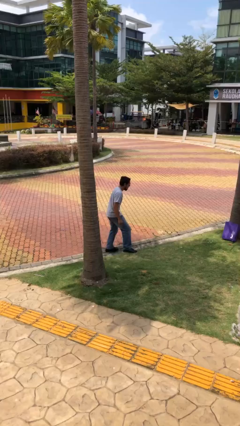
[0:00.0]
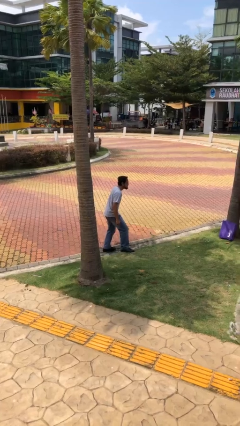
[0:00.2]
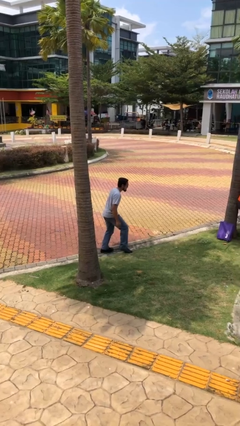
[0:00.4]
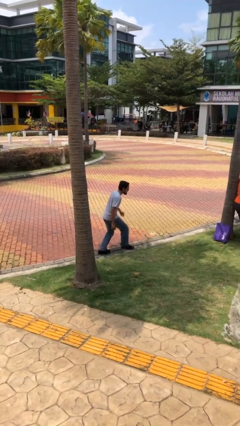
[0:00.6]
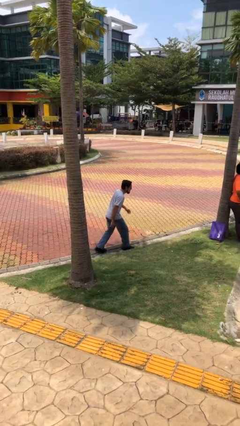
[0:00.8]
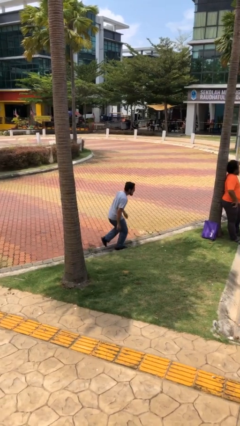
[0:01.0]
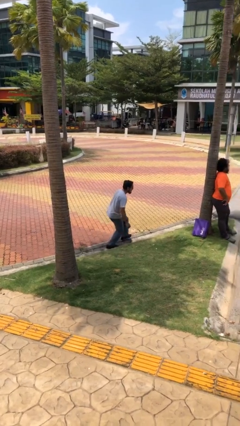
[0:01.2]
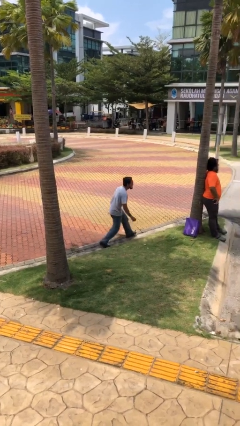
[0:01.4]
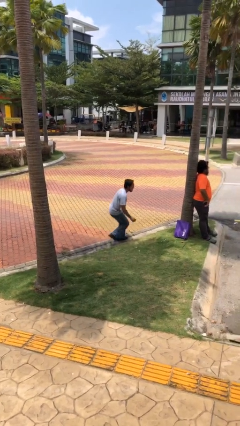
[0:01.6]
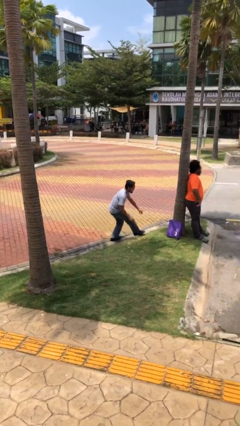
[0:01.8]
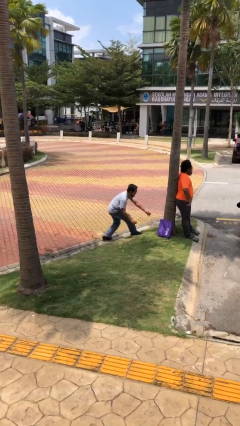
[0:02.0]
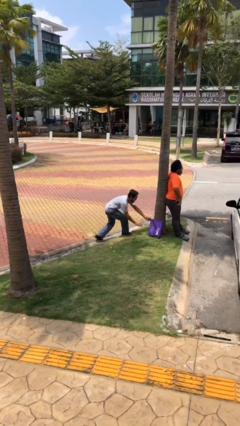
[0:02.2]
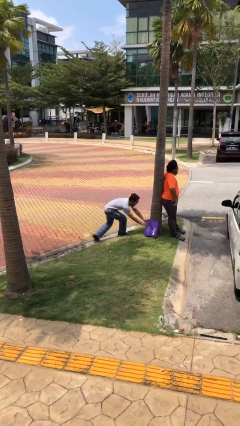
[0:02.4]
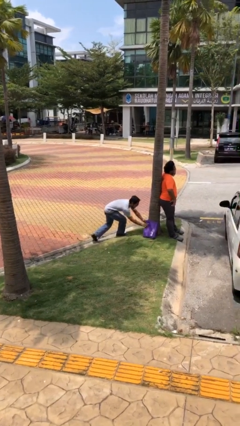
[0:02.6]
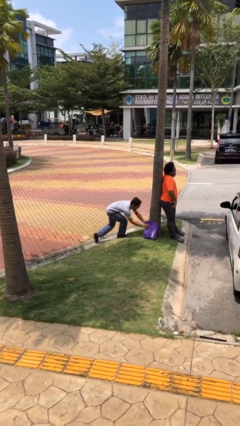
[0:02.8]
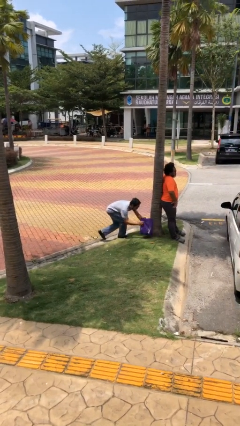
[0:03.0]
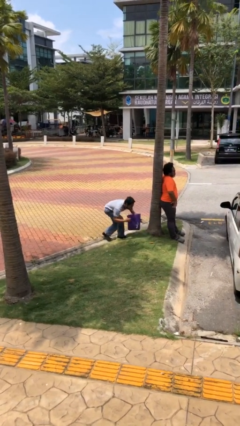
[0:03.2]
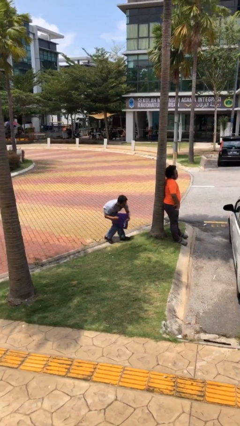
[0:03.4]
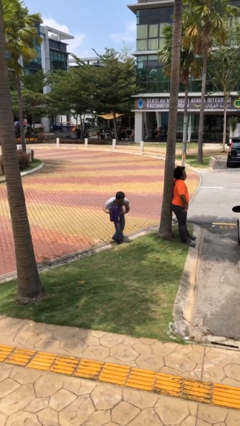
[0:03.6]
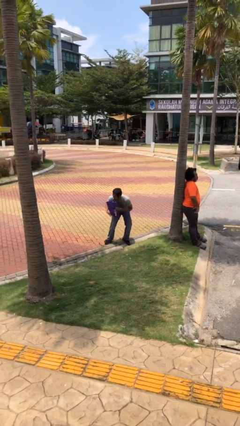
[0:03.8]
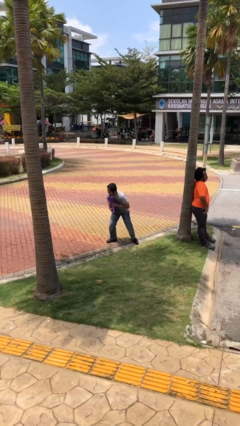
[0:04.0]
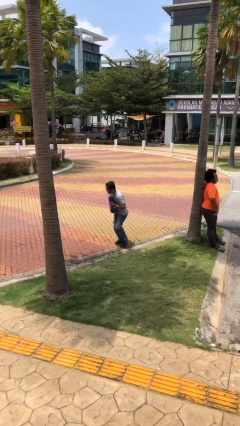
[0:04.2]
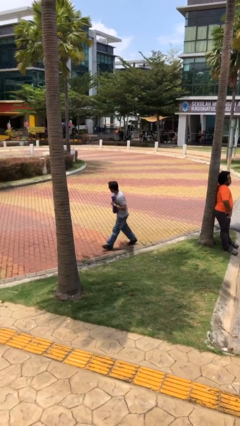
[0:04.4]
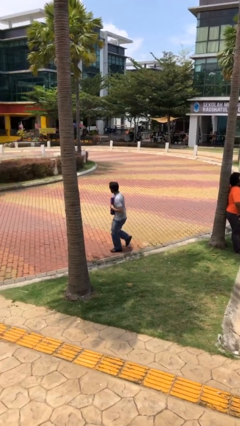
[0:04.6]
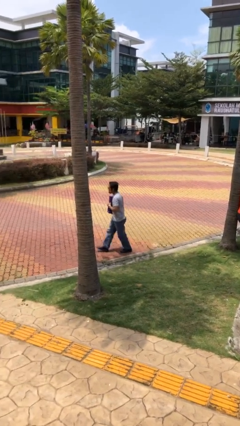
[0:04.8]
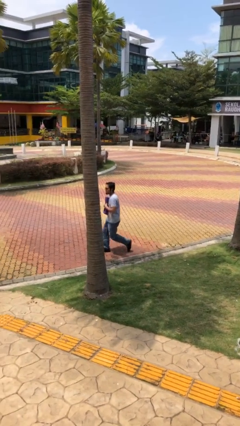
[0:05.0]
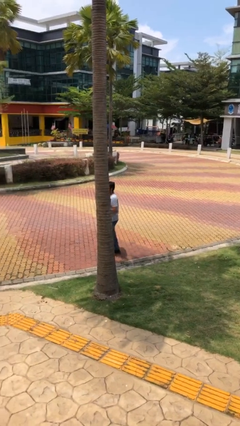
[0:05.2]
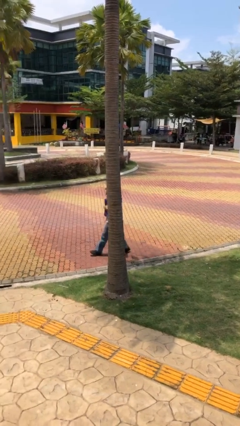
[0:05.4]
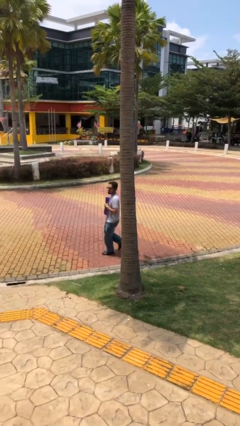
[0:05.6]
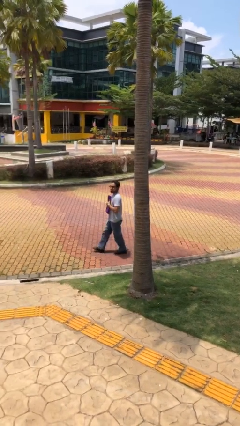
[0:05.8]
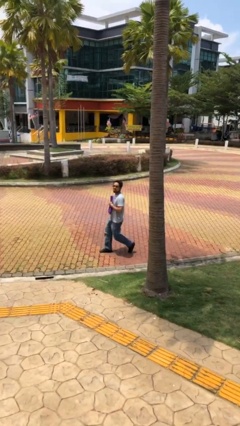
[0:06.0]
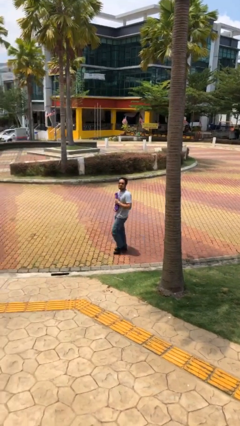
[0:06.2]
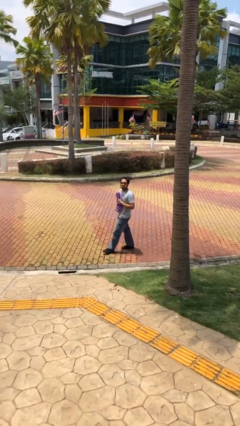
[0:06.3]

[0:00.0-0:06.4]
person steals object from person

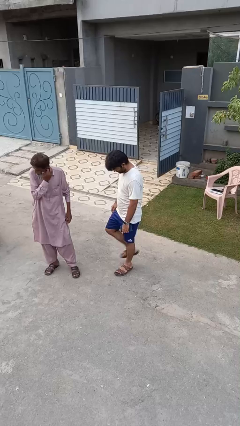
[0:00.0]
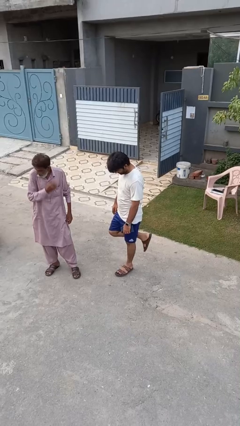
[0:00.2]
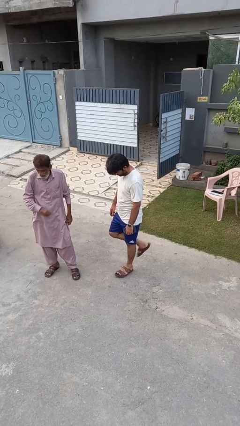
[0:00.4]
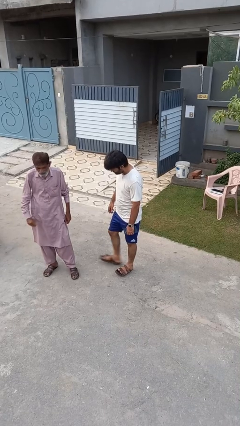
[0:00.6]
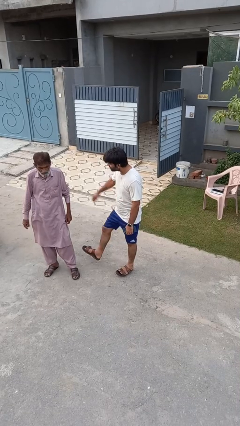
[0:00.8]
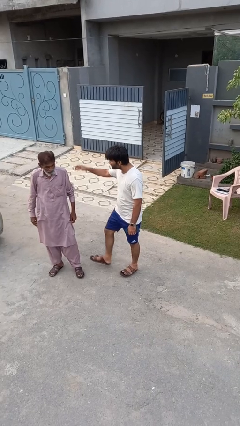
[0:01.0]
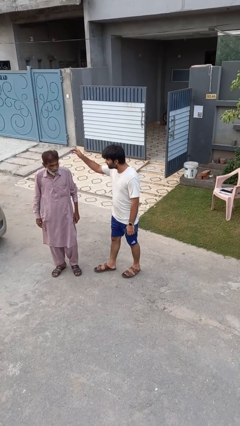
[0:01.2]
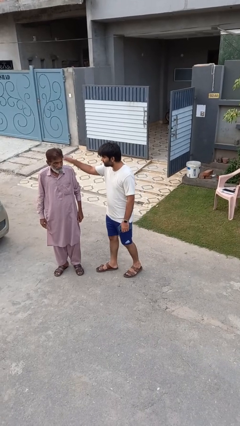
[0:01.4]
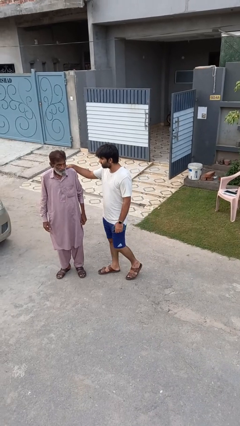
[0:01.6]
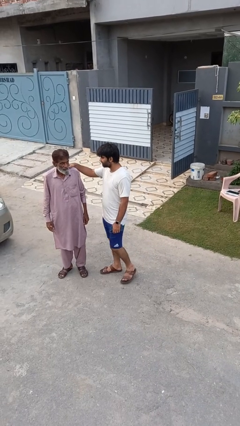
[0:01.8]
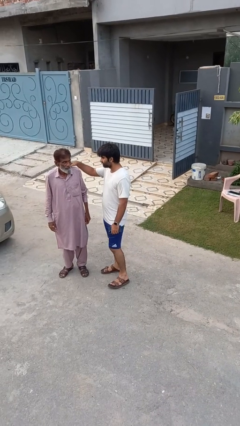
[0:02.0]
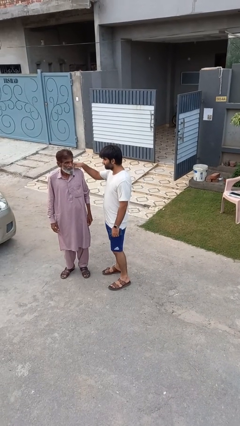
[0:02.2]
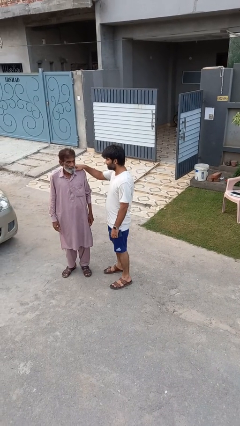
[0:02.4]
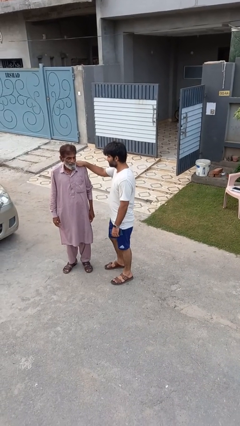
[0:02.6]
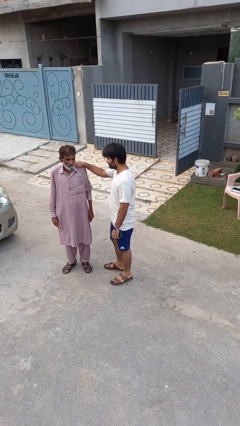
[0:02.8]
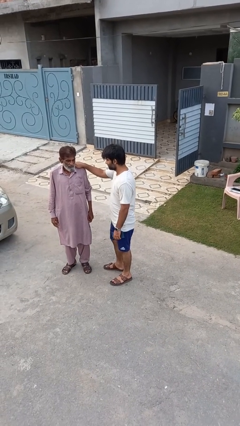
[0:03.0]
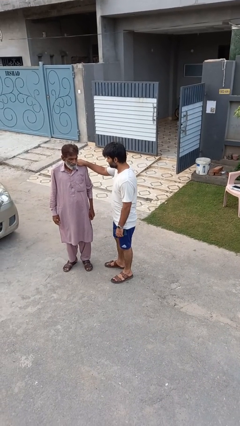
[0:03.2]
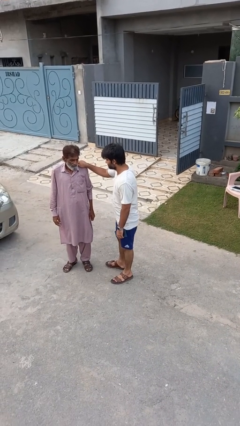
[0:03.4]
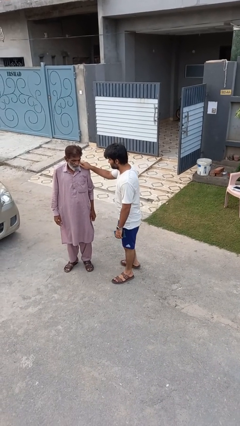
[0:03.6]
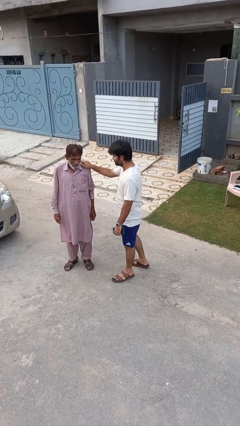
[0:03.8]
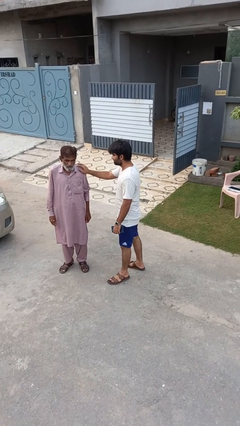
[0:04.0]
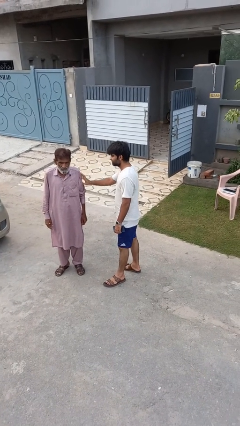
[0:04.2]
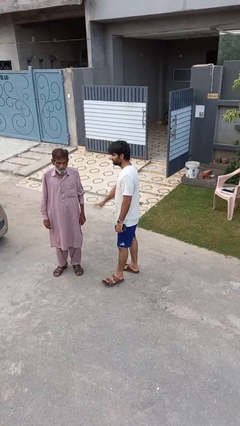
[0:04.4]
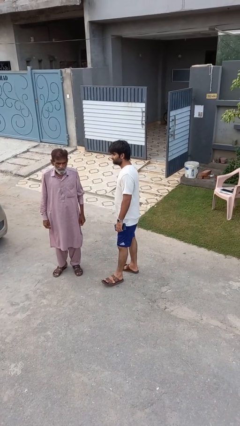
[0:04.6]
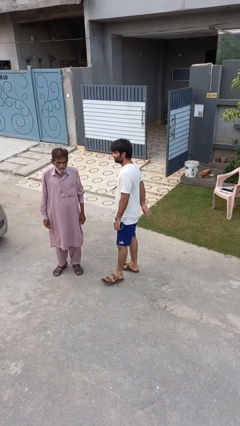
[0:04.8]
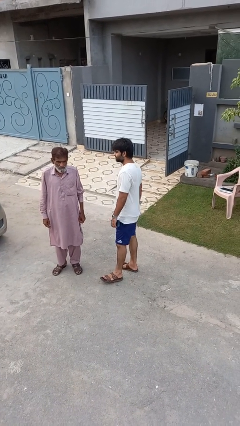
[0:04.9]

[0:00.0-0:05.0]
person pounds shoulders of person

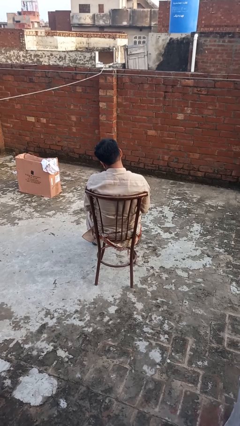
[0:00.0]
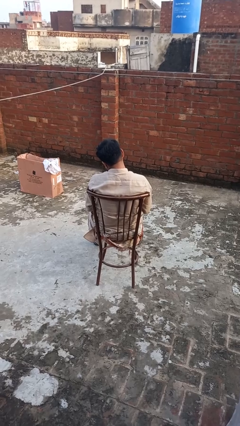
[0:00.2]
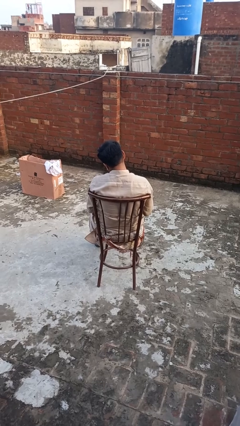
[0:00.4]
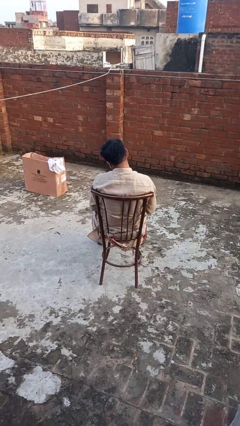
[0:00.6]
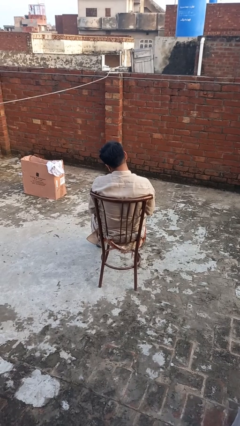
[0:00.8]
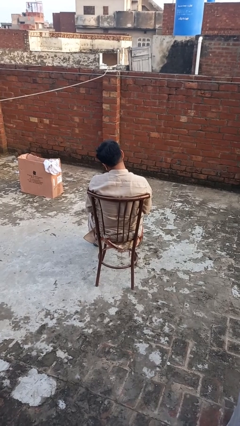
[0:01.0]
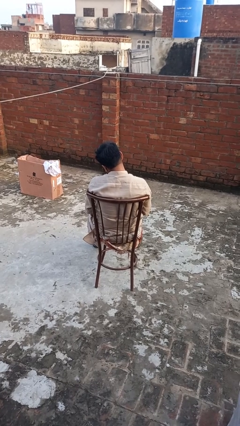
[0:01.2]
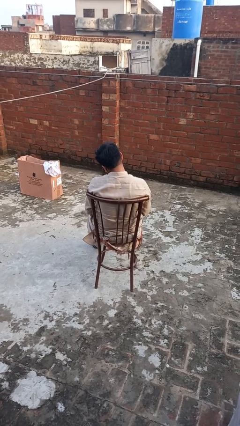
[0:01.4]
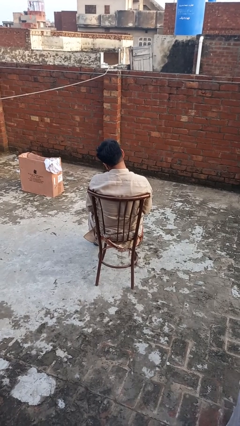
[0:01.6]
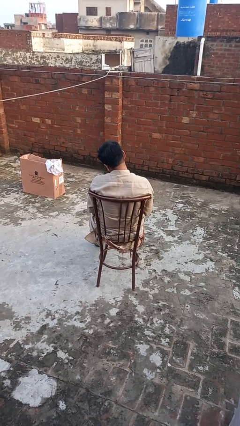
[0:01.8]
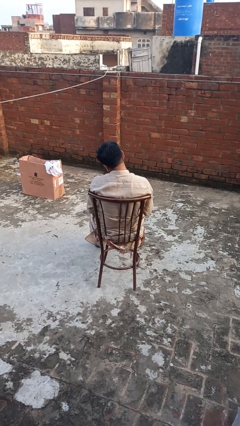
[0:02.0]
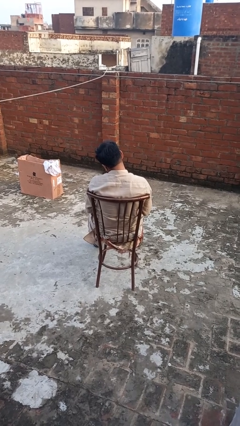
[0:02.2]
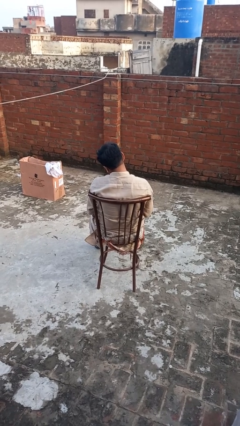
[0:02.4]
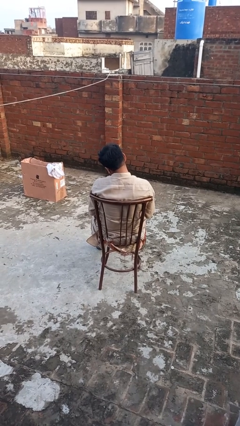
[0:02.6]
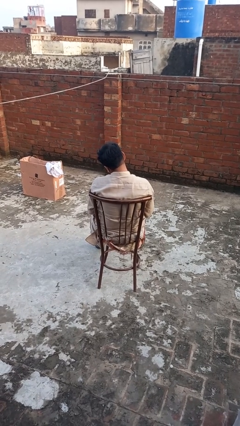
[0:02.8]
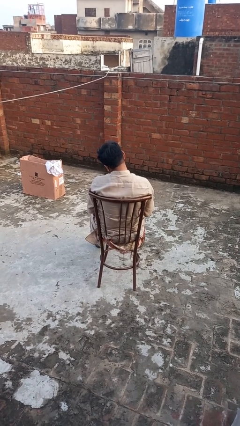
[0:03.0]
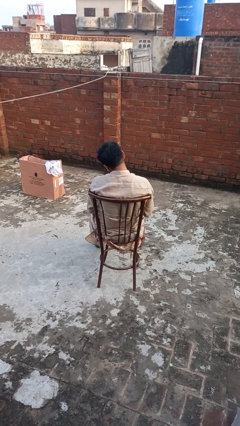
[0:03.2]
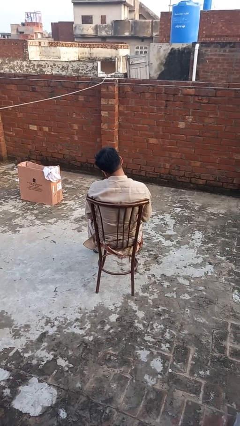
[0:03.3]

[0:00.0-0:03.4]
person stirs mug

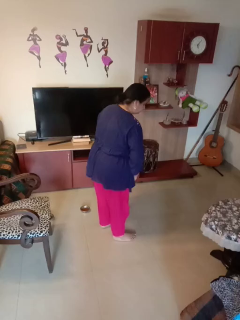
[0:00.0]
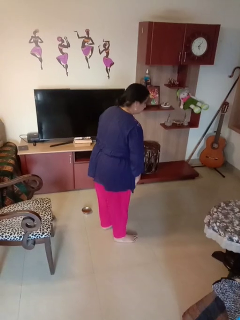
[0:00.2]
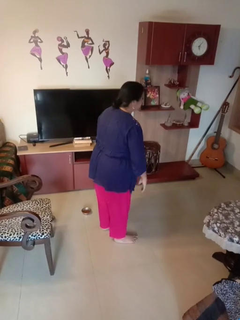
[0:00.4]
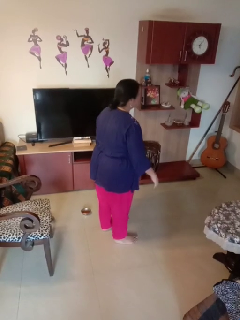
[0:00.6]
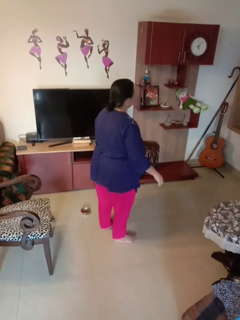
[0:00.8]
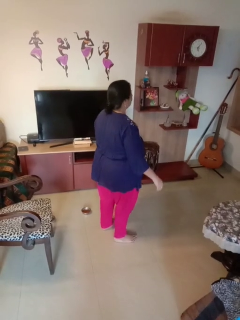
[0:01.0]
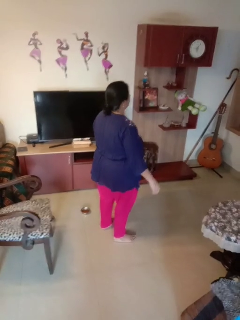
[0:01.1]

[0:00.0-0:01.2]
person slaps hands on thighs

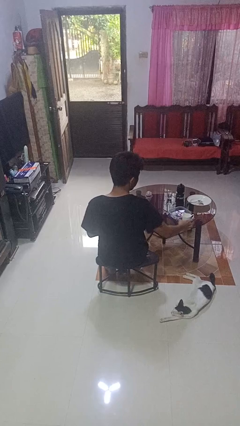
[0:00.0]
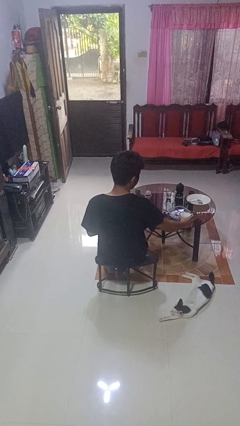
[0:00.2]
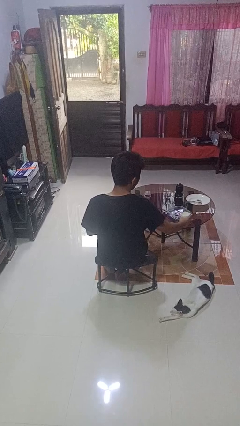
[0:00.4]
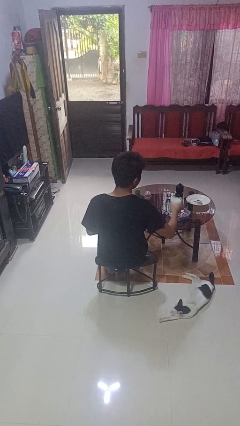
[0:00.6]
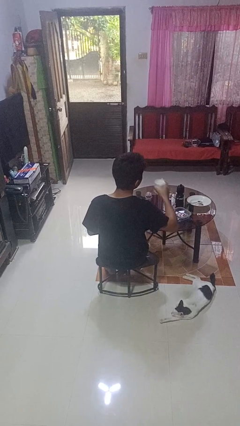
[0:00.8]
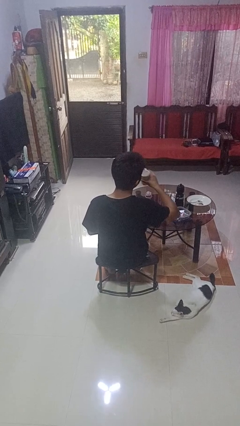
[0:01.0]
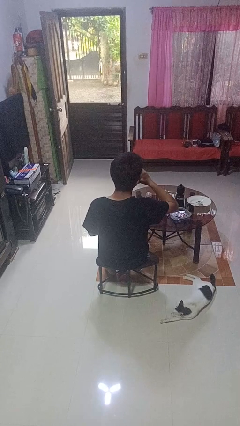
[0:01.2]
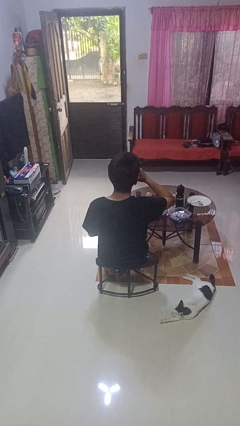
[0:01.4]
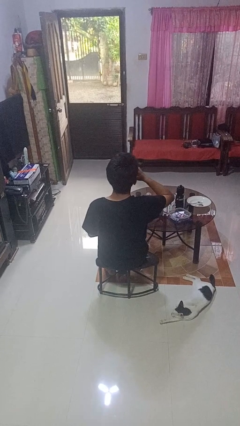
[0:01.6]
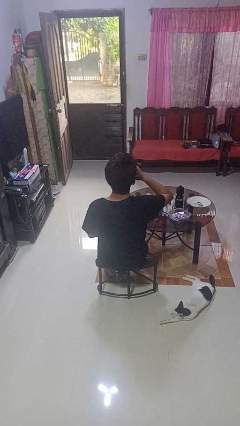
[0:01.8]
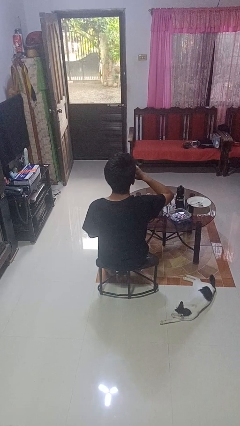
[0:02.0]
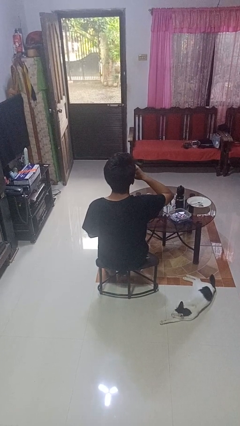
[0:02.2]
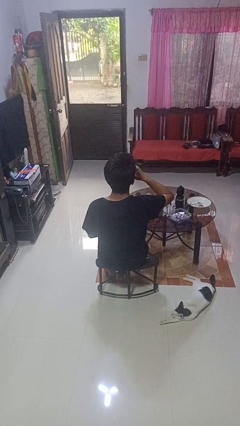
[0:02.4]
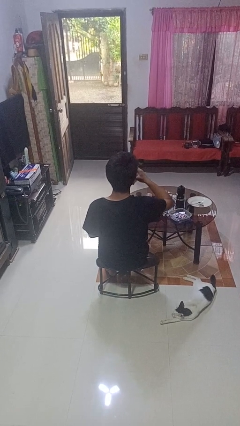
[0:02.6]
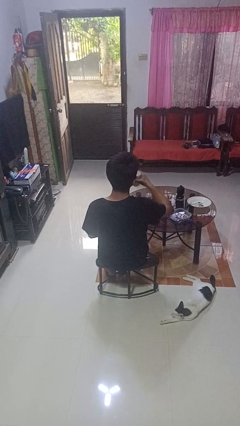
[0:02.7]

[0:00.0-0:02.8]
person drinks from cup
